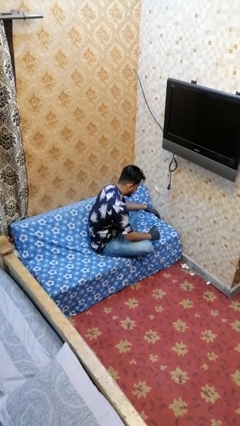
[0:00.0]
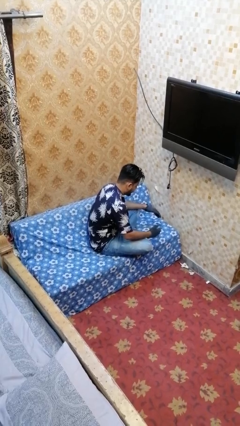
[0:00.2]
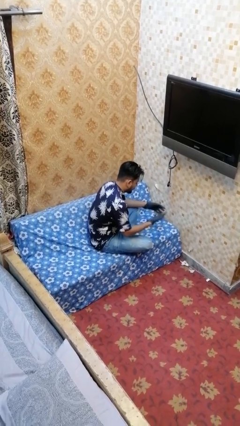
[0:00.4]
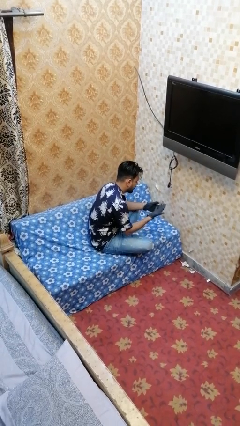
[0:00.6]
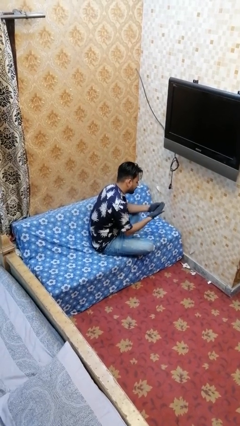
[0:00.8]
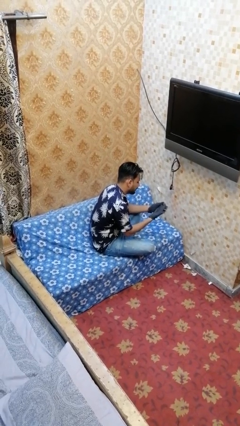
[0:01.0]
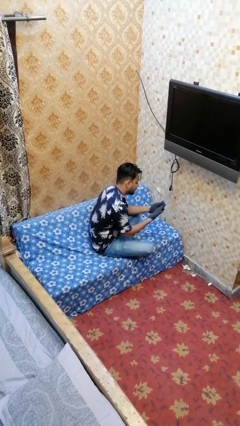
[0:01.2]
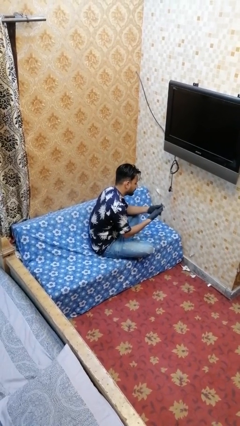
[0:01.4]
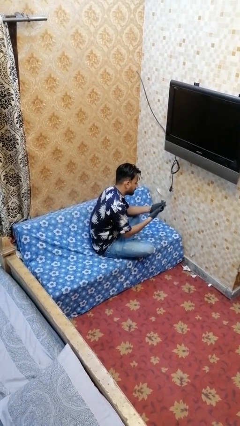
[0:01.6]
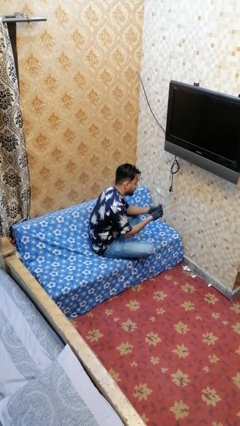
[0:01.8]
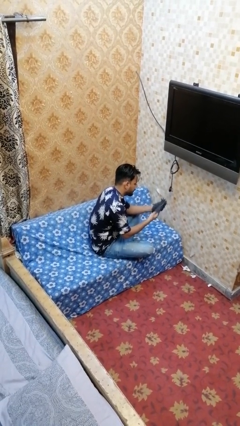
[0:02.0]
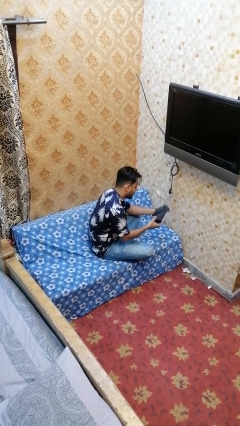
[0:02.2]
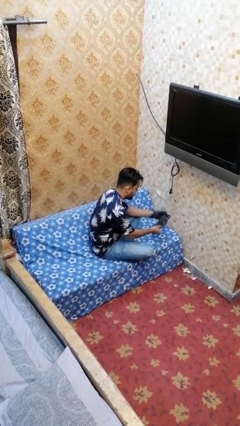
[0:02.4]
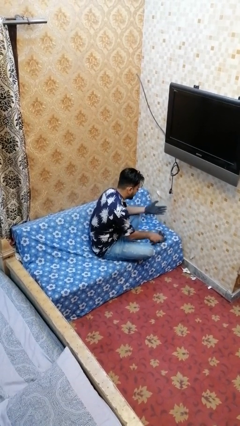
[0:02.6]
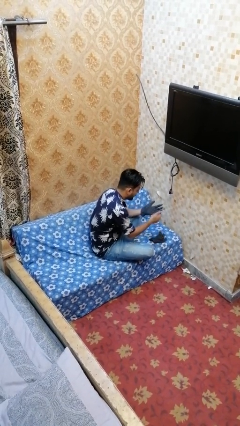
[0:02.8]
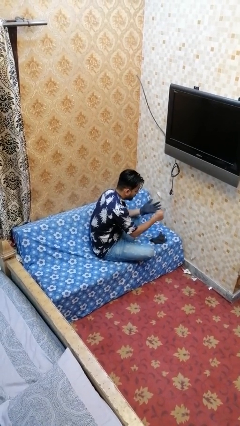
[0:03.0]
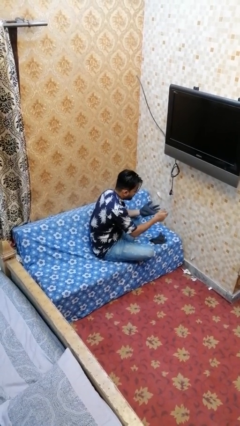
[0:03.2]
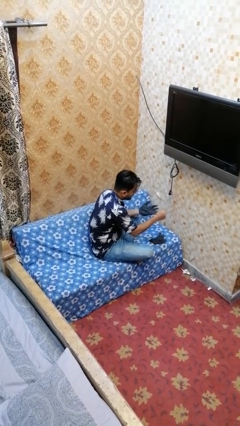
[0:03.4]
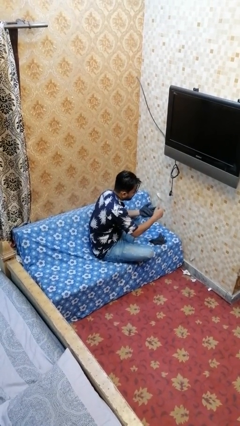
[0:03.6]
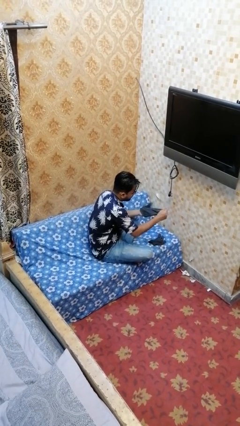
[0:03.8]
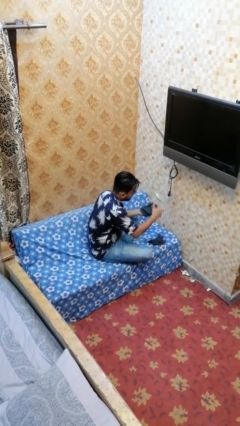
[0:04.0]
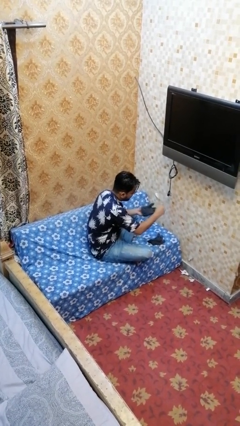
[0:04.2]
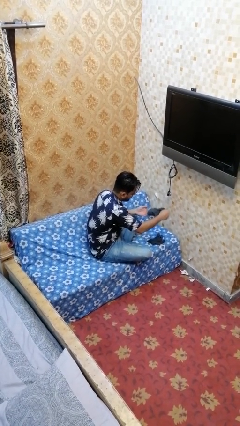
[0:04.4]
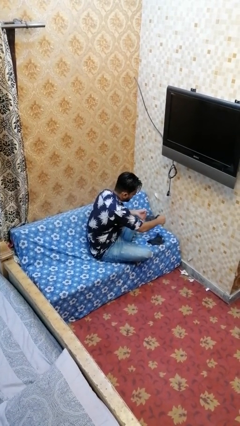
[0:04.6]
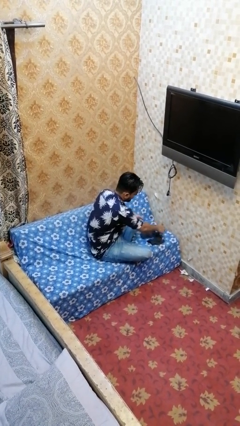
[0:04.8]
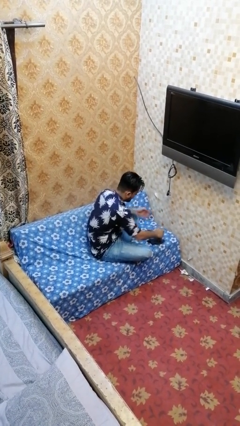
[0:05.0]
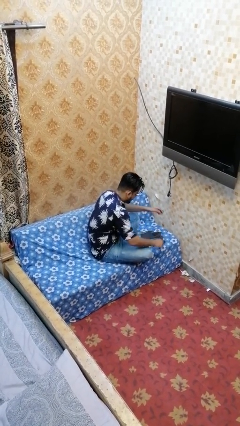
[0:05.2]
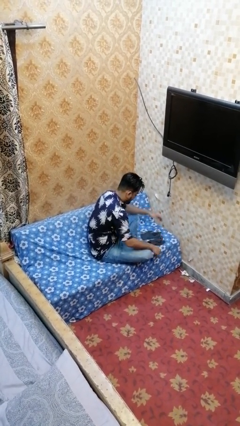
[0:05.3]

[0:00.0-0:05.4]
person takes off gloves

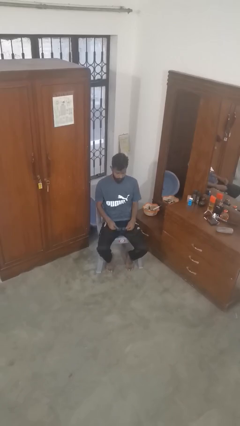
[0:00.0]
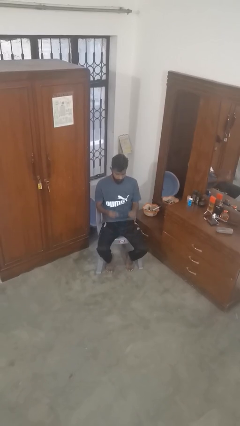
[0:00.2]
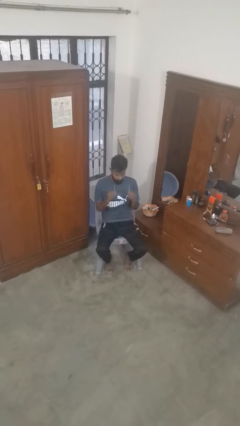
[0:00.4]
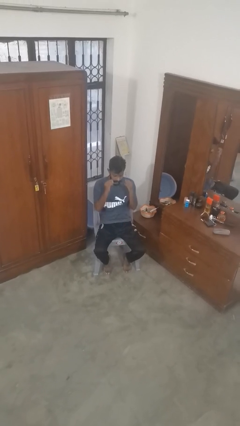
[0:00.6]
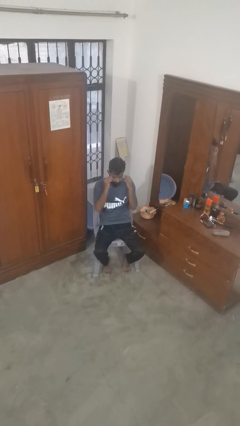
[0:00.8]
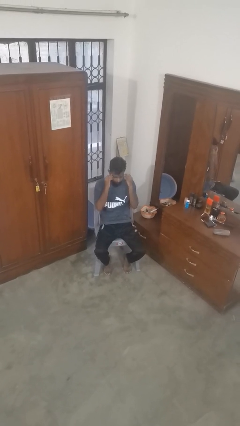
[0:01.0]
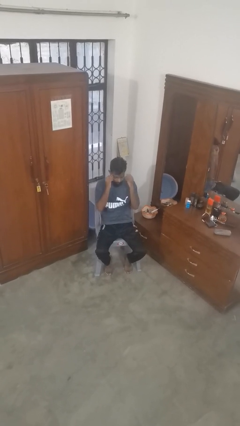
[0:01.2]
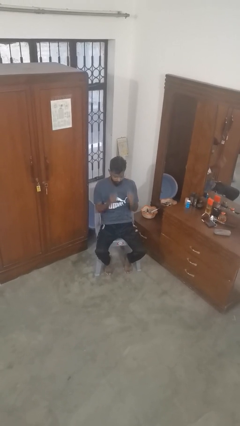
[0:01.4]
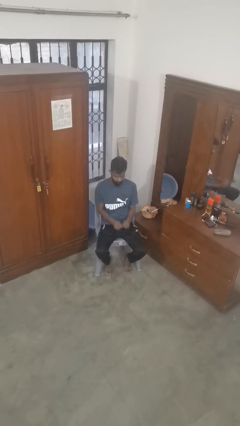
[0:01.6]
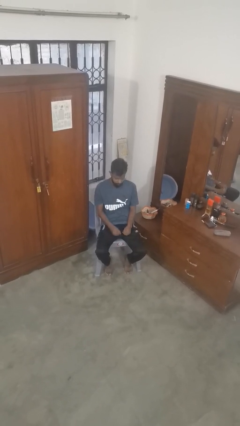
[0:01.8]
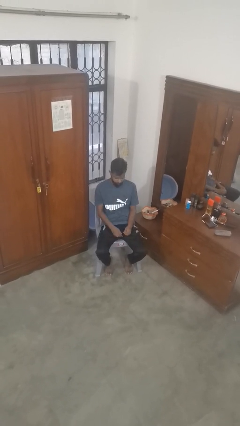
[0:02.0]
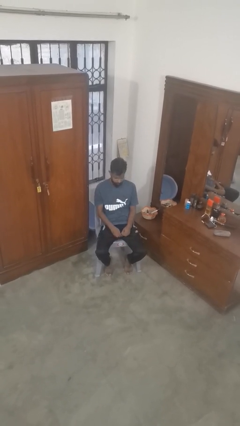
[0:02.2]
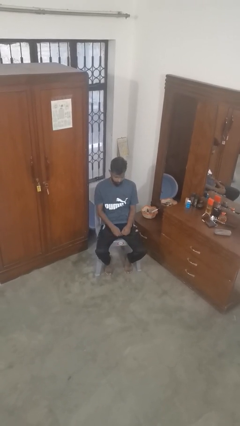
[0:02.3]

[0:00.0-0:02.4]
person puts on glasses

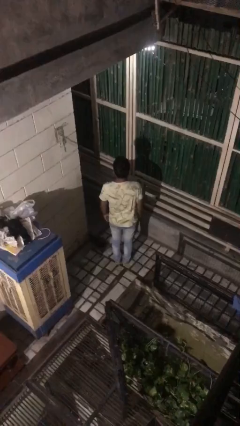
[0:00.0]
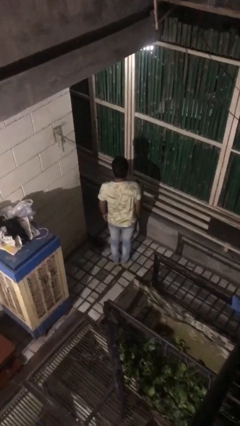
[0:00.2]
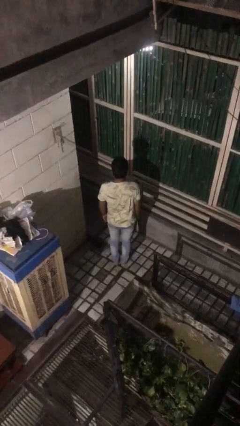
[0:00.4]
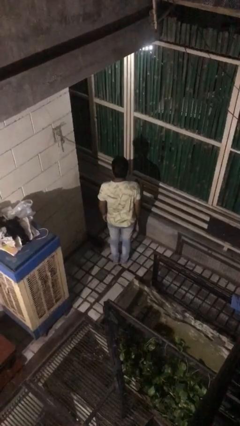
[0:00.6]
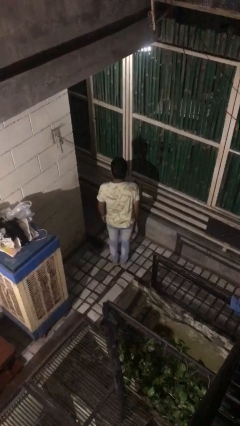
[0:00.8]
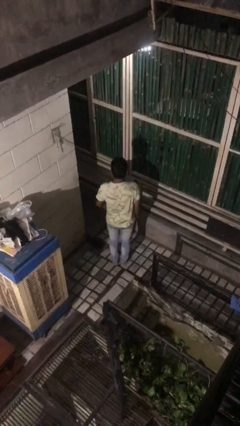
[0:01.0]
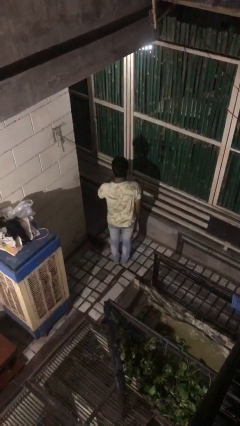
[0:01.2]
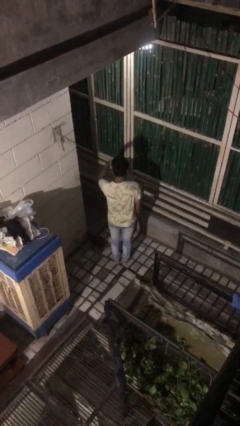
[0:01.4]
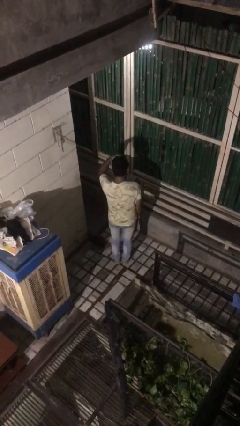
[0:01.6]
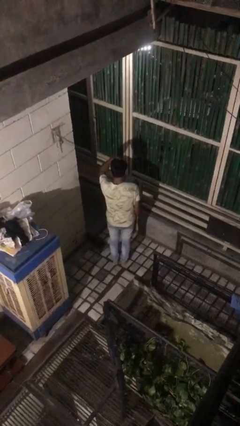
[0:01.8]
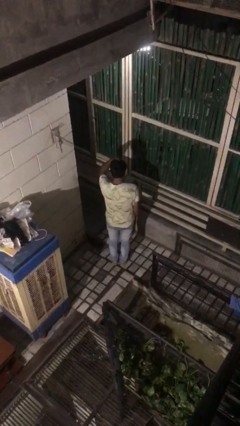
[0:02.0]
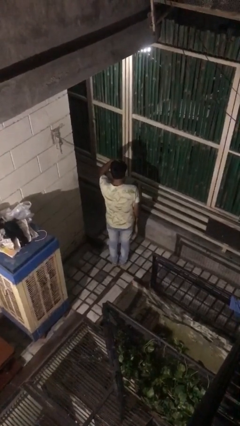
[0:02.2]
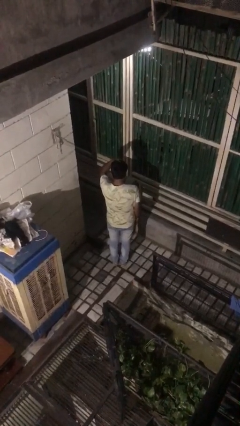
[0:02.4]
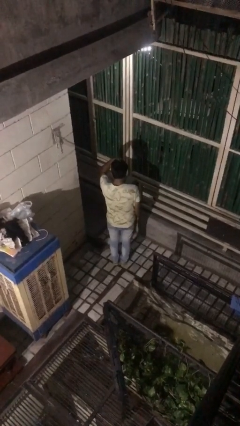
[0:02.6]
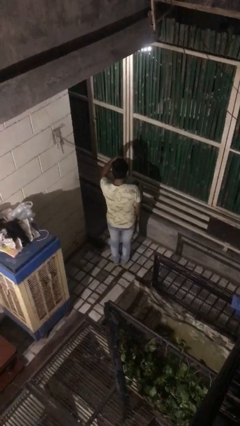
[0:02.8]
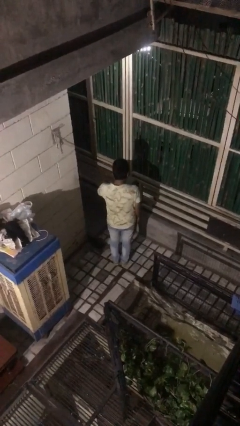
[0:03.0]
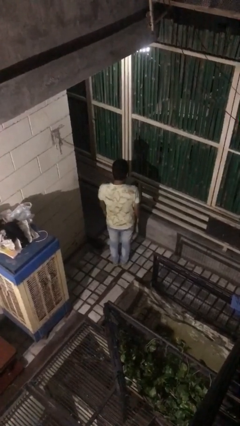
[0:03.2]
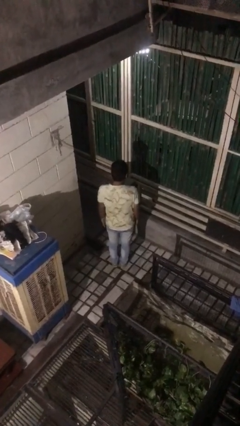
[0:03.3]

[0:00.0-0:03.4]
person pats head

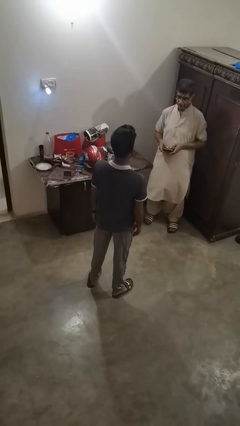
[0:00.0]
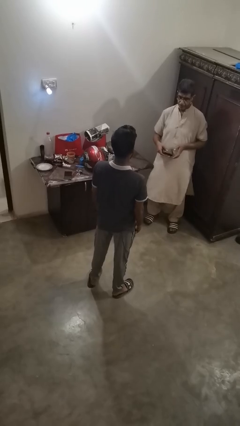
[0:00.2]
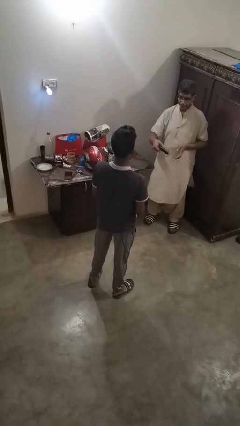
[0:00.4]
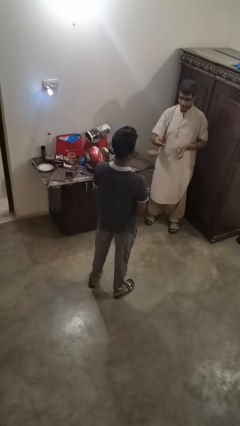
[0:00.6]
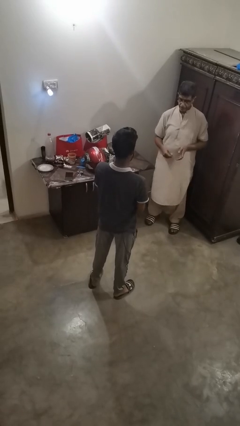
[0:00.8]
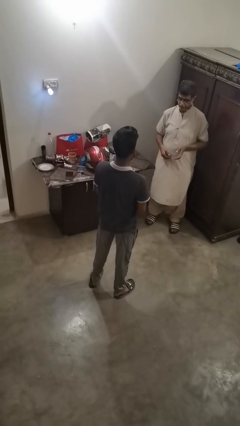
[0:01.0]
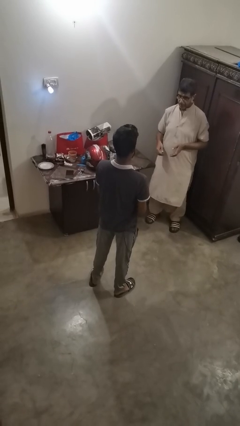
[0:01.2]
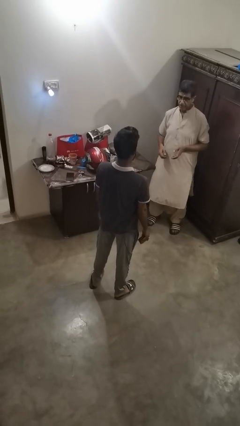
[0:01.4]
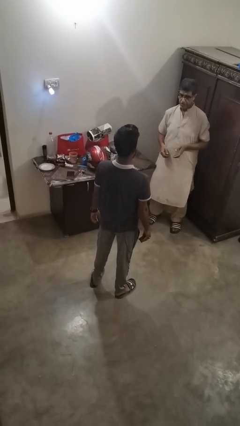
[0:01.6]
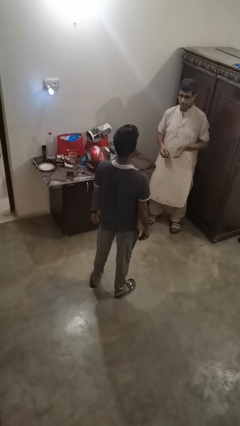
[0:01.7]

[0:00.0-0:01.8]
person catches object from person

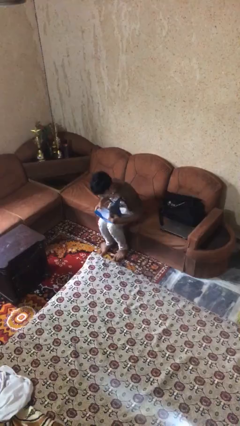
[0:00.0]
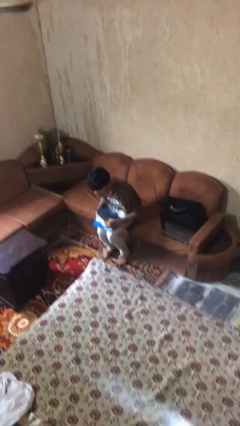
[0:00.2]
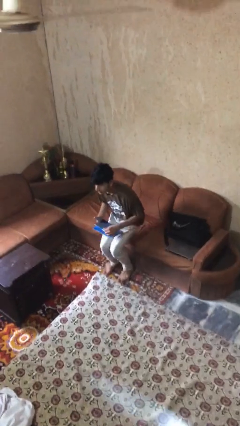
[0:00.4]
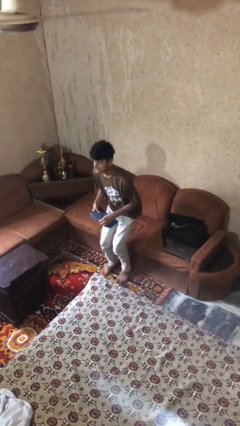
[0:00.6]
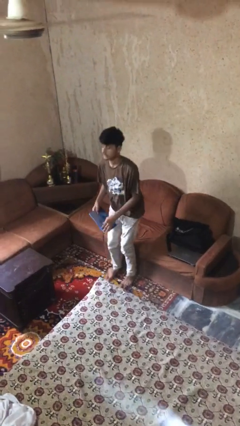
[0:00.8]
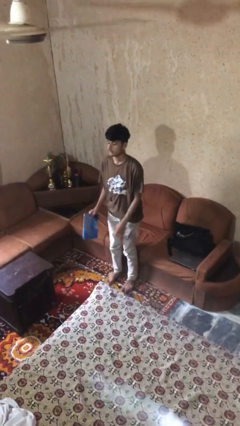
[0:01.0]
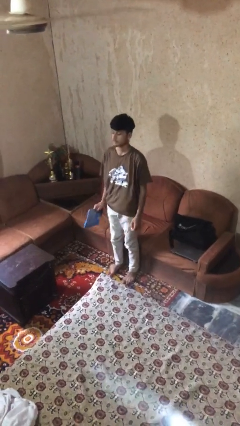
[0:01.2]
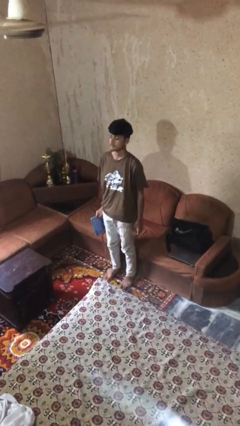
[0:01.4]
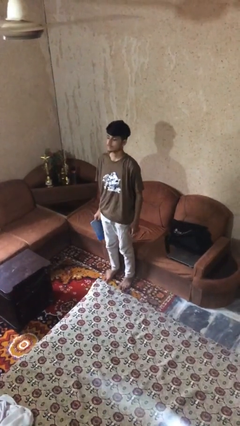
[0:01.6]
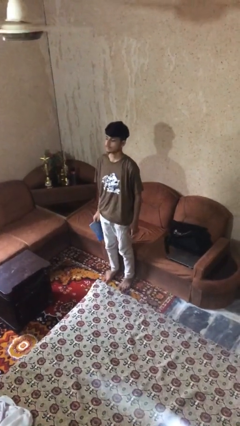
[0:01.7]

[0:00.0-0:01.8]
person stands up

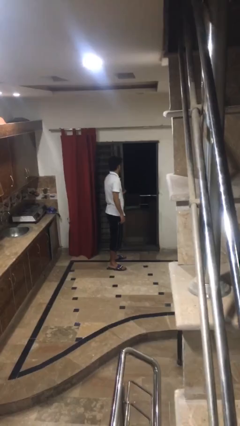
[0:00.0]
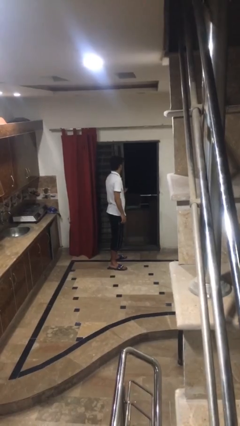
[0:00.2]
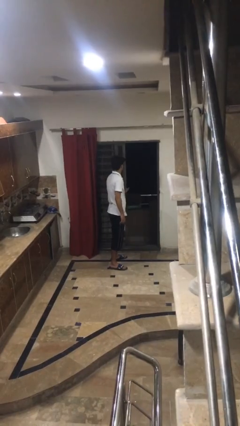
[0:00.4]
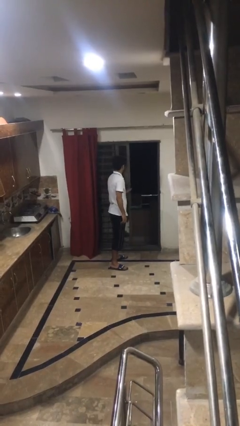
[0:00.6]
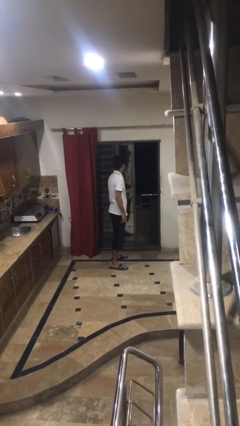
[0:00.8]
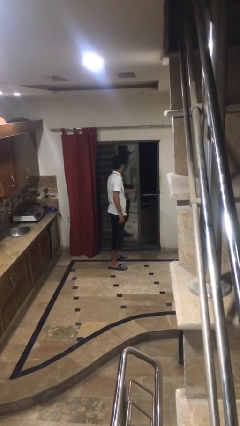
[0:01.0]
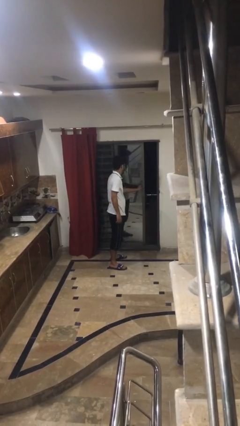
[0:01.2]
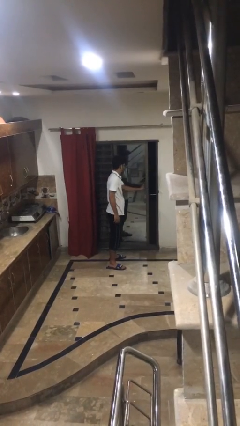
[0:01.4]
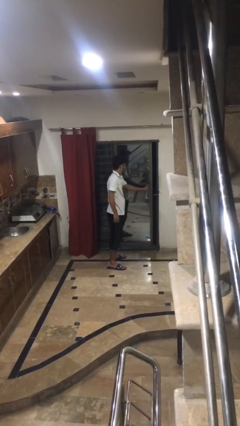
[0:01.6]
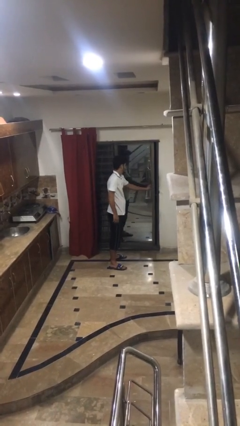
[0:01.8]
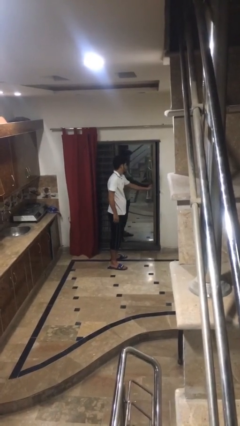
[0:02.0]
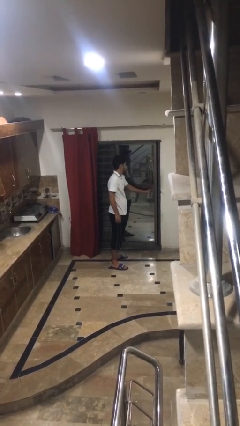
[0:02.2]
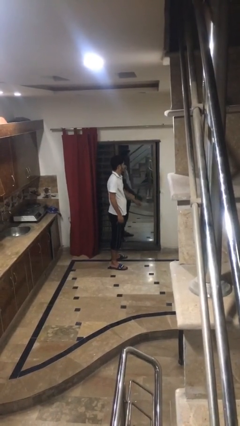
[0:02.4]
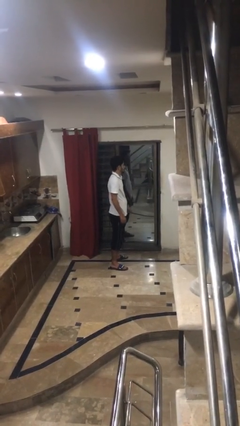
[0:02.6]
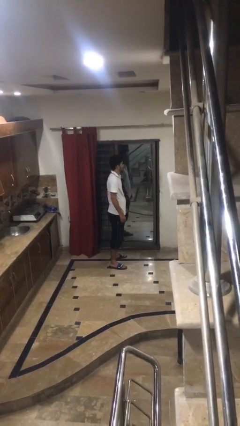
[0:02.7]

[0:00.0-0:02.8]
person closes sliding door
